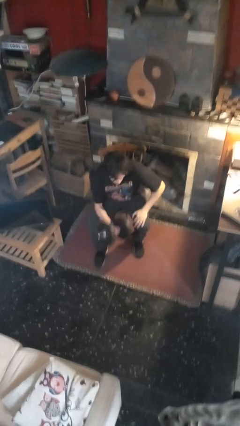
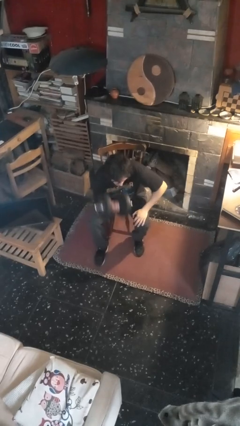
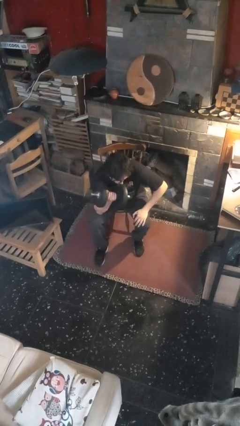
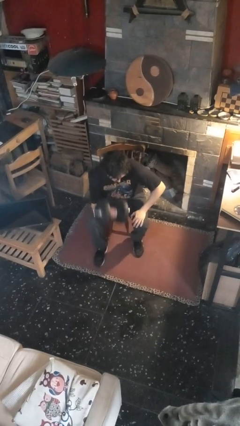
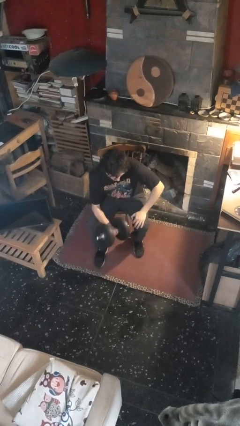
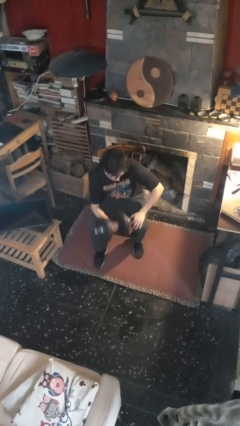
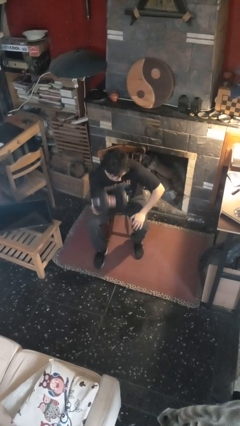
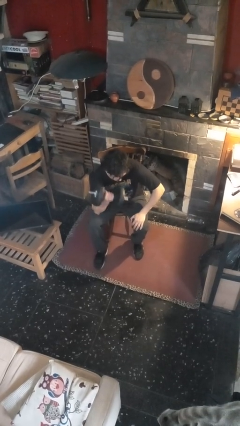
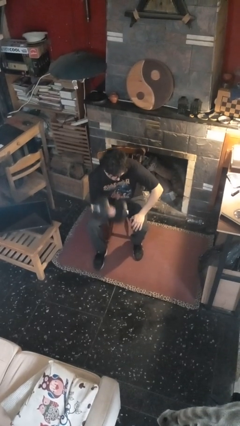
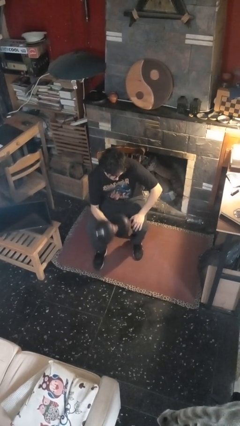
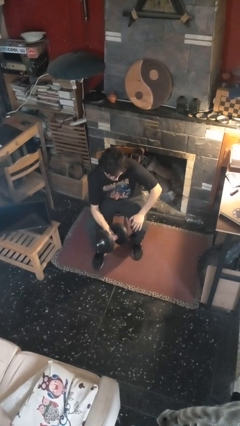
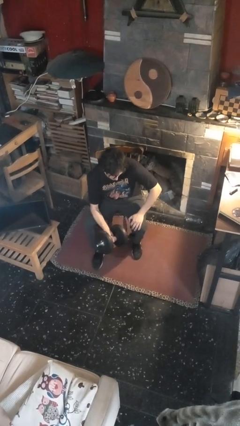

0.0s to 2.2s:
person lifts dumbbells

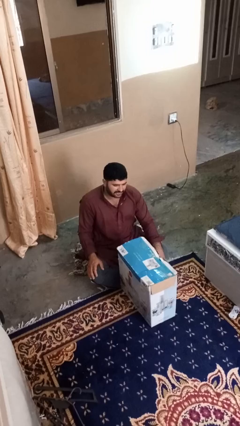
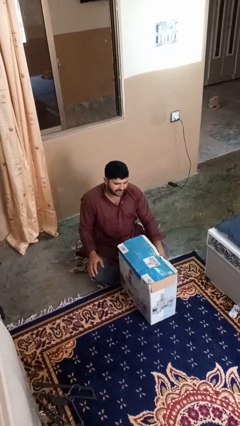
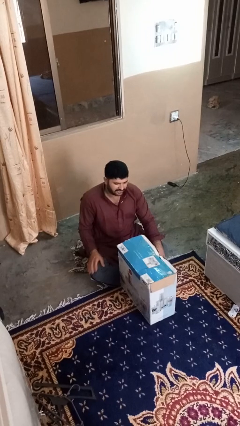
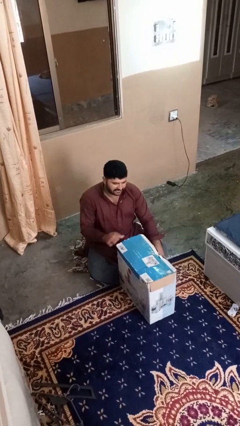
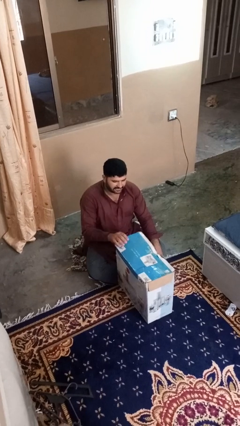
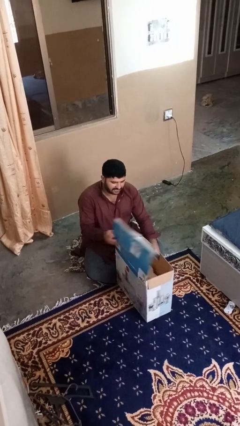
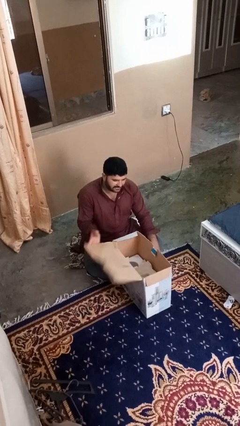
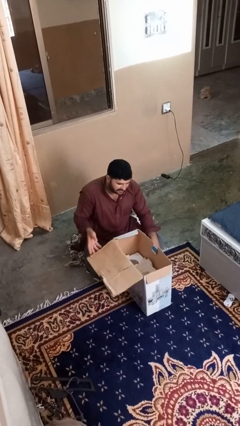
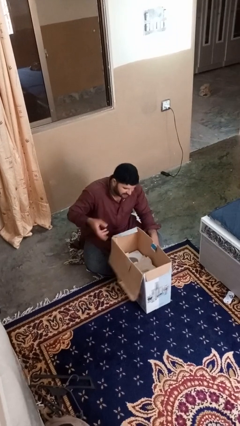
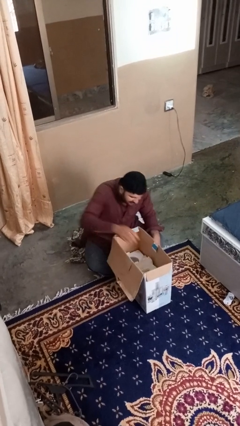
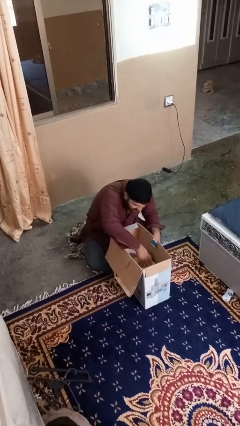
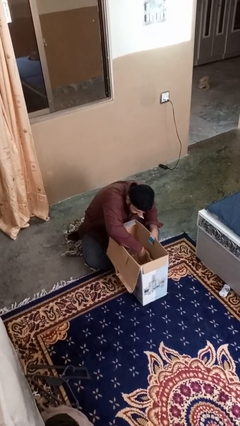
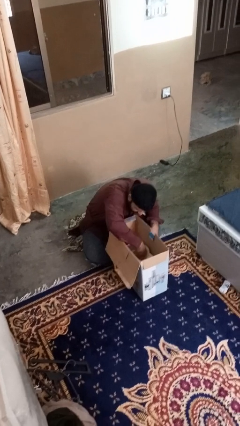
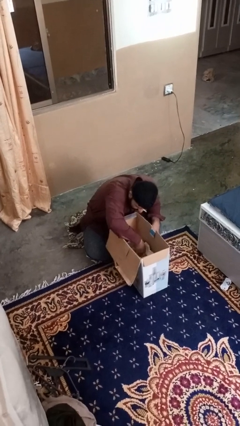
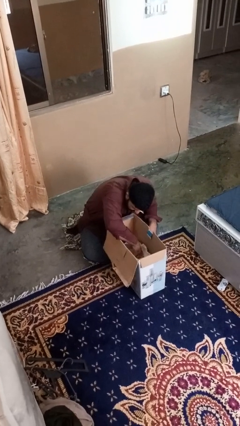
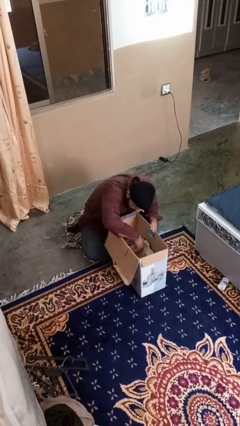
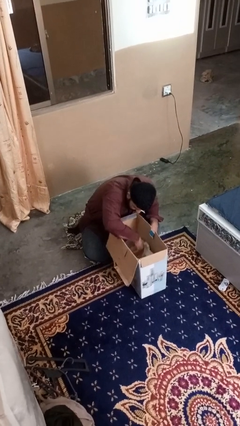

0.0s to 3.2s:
person searches in box

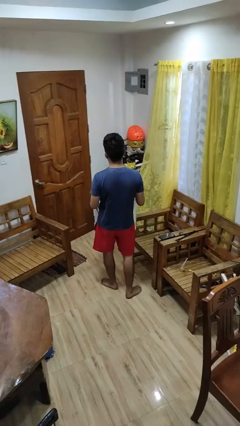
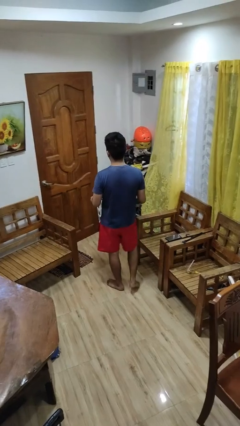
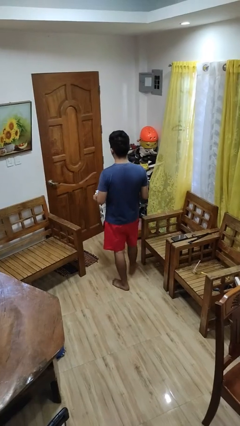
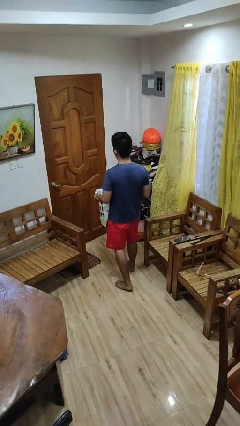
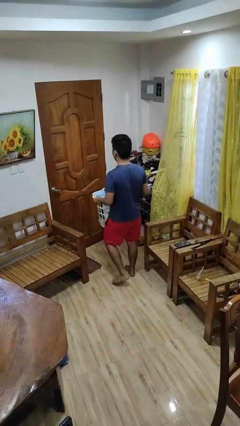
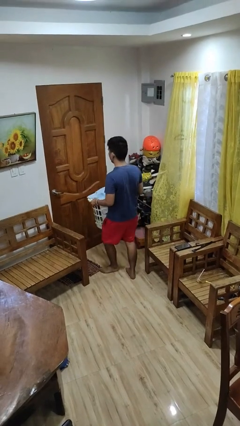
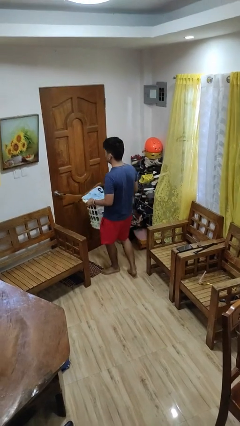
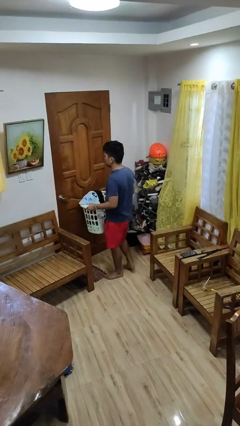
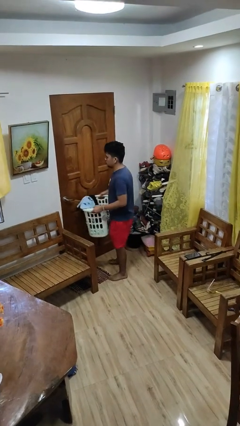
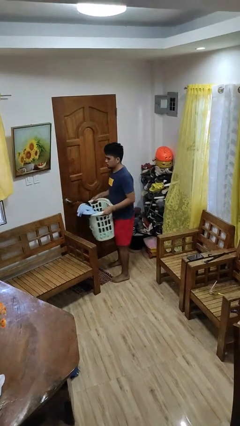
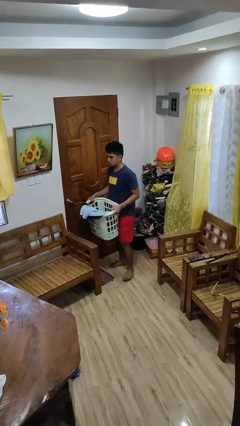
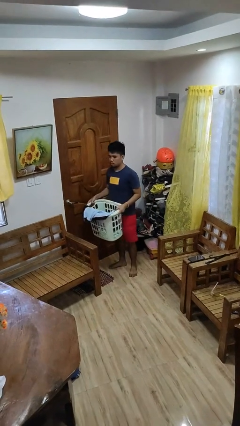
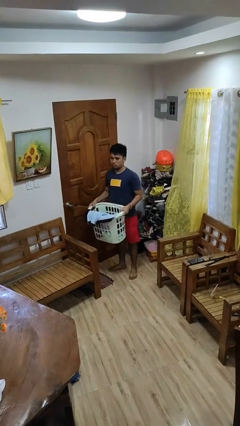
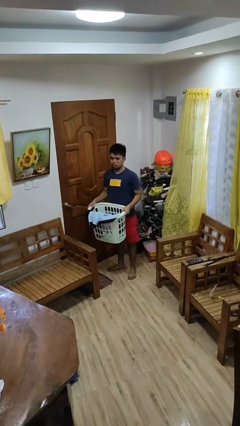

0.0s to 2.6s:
person carries laundry basket

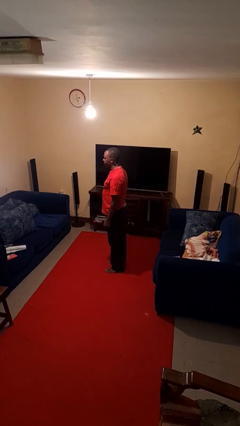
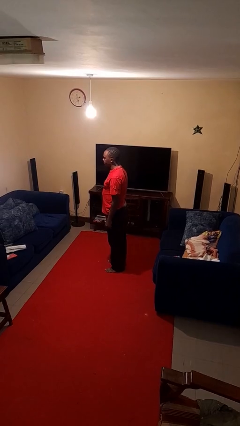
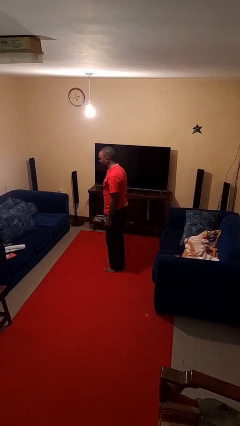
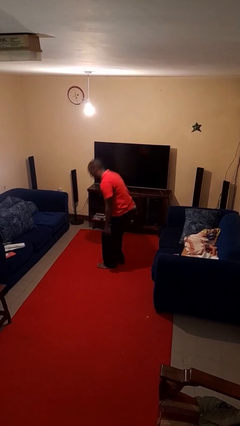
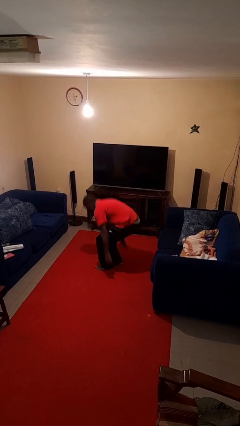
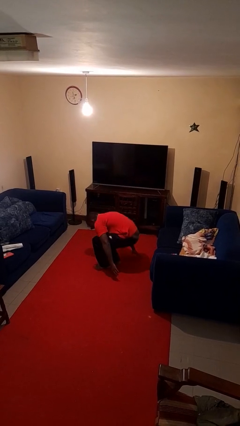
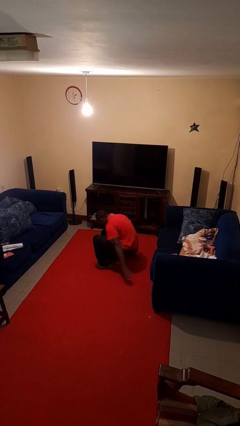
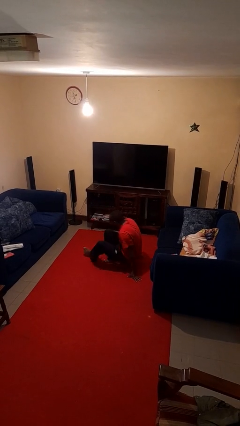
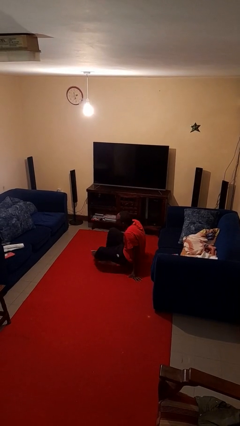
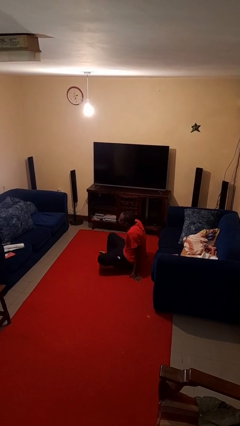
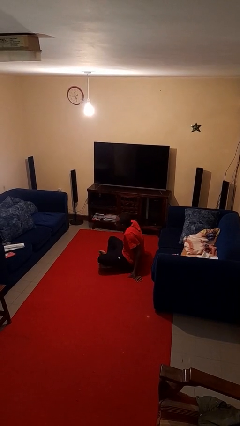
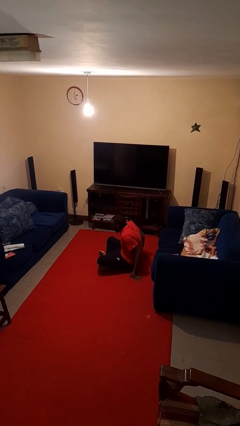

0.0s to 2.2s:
person sits crisscross

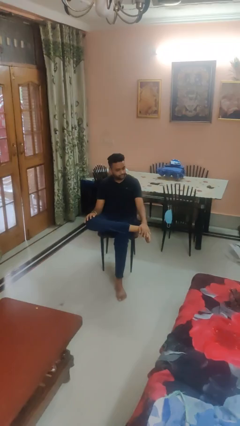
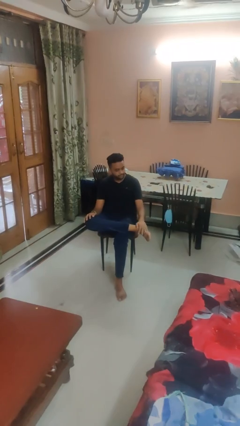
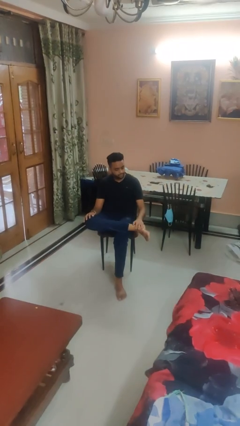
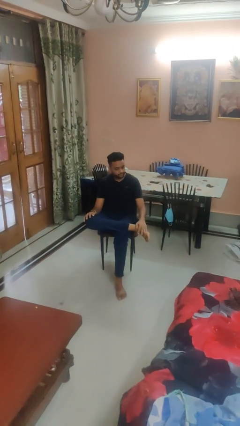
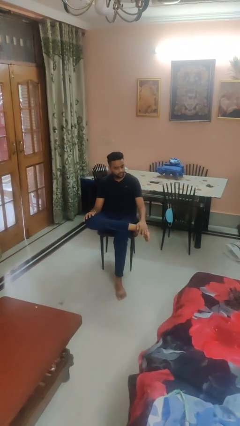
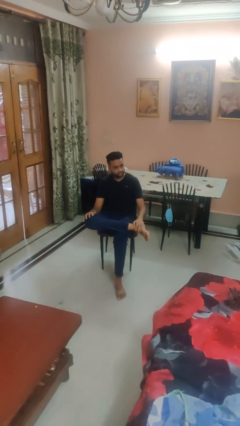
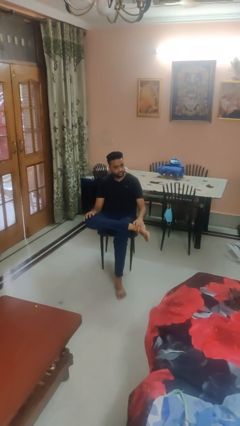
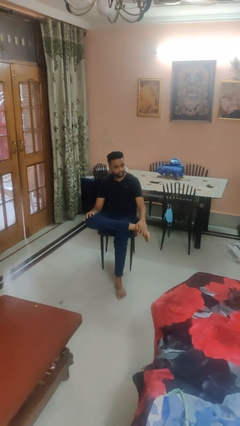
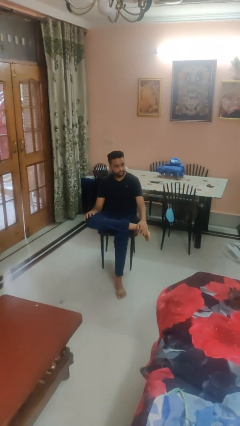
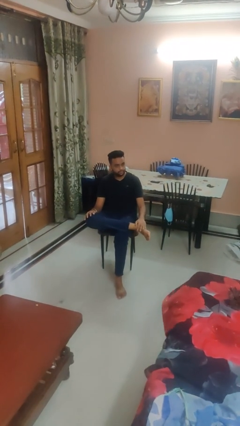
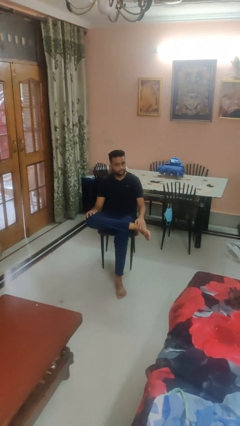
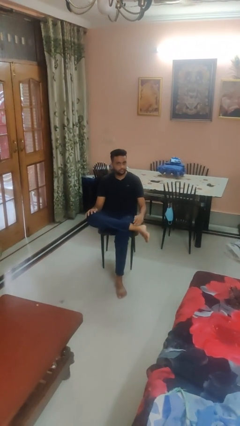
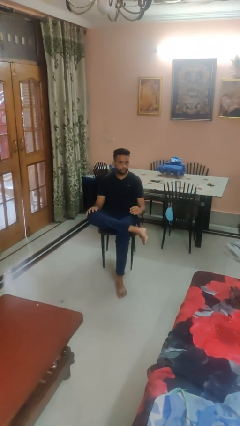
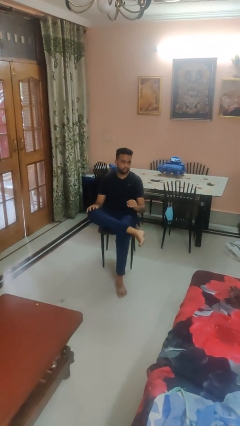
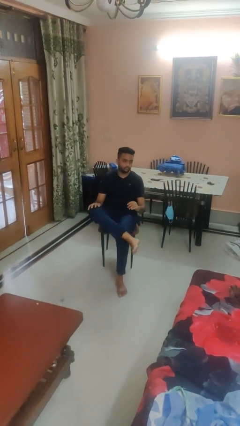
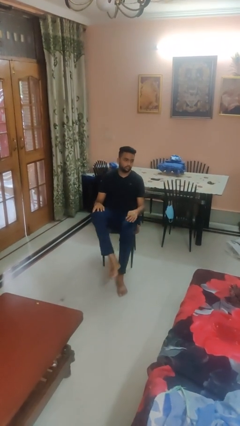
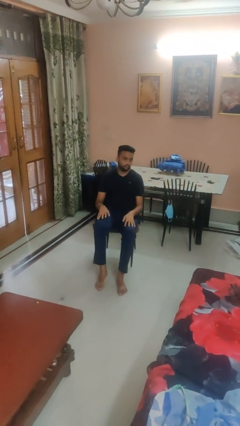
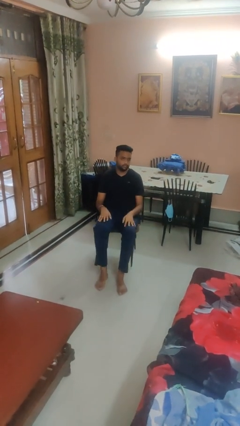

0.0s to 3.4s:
person rubs foot

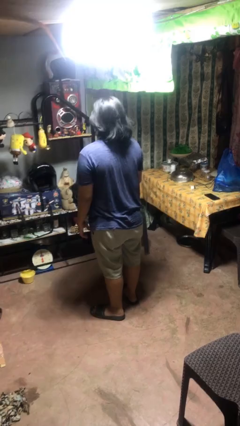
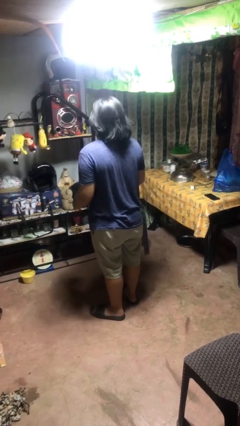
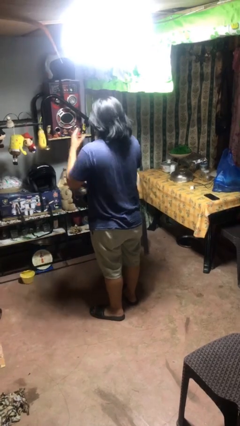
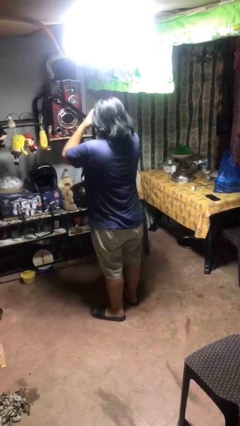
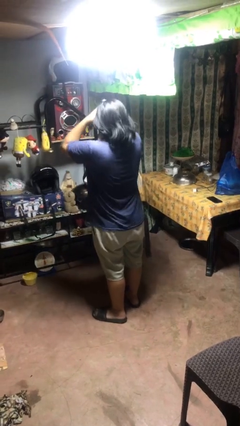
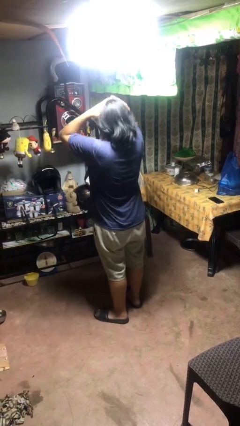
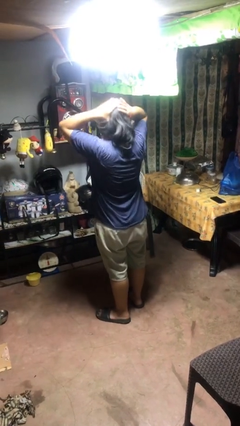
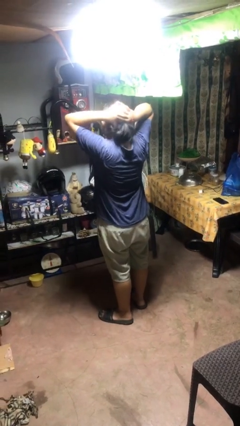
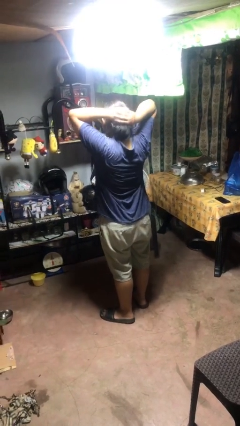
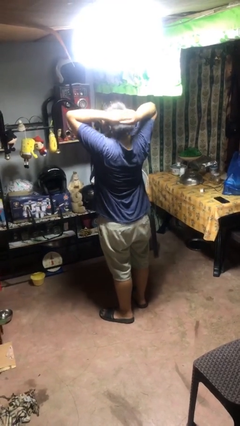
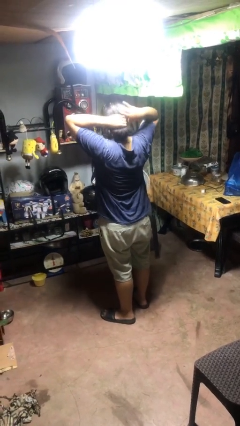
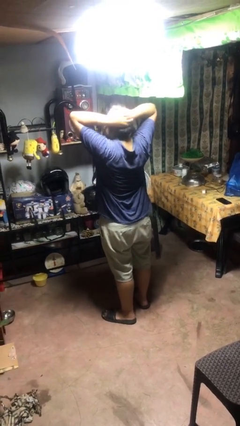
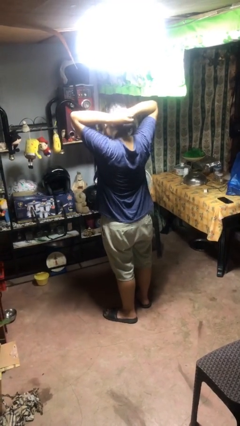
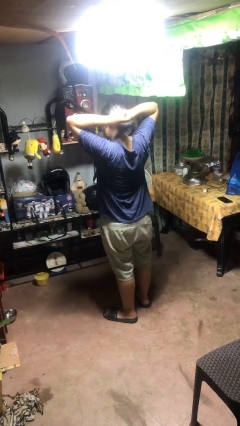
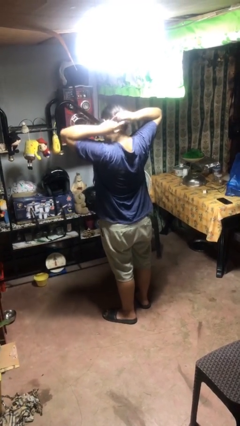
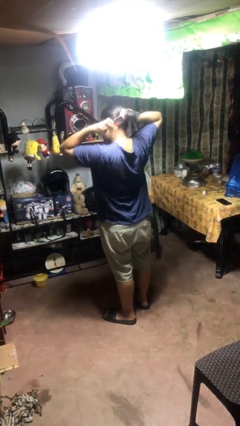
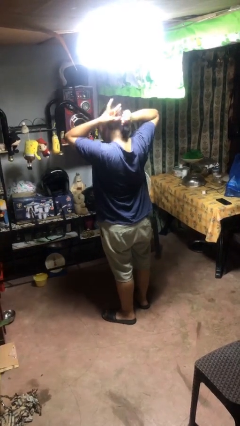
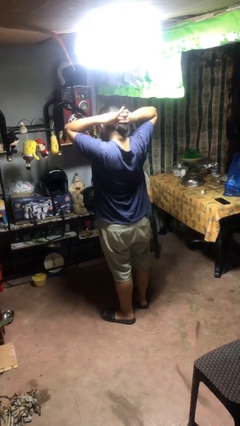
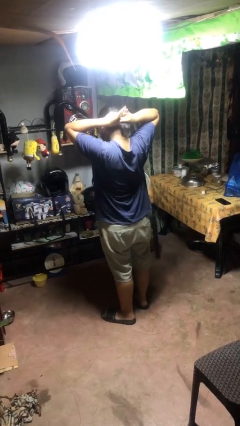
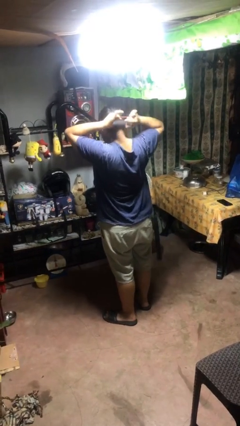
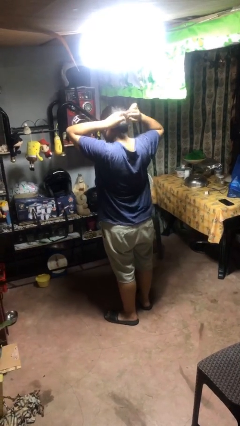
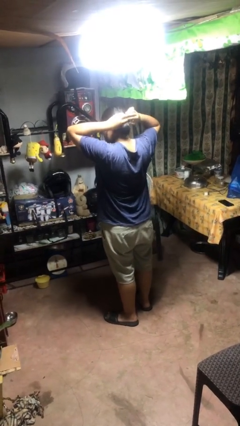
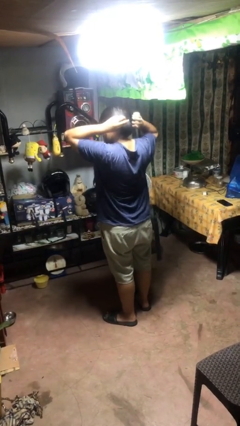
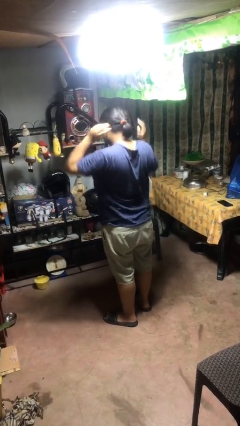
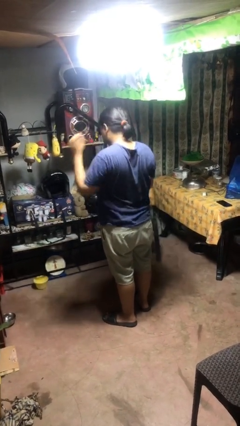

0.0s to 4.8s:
person puts hair in ponytail
